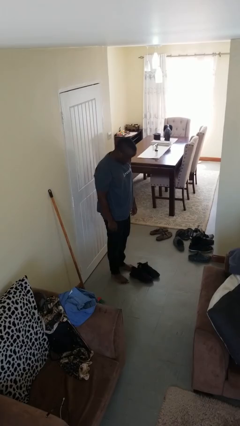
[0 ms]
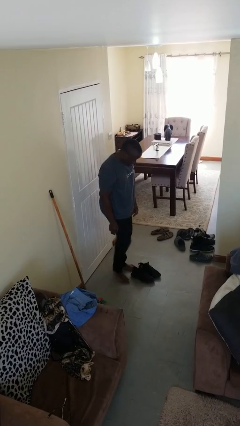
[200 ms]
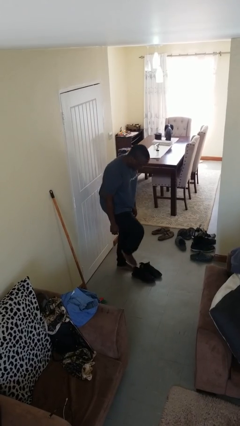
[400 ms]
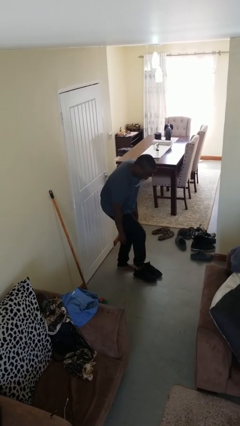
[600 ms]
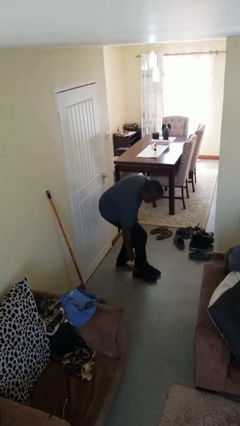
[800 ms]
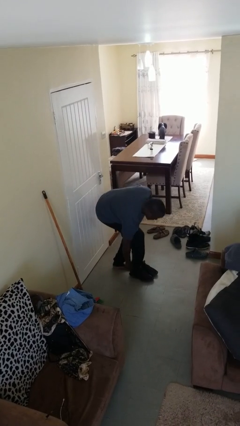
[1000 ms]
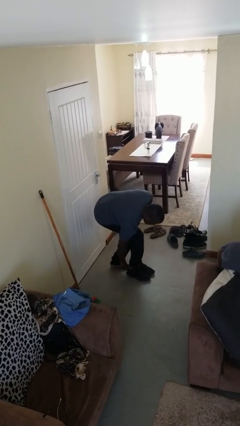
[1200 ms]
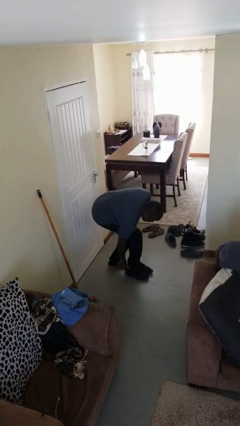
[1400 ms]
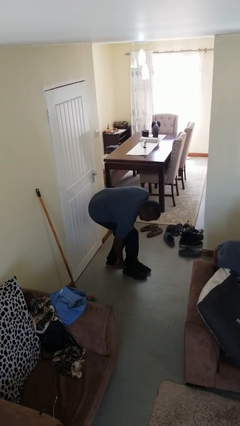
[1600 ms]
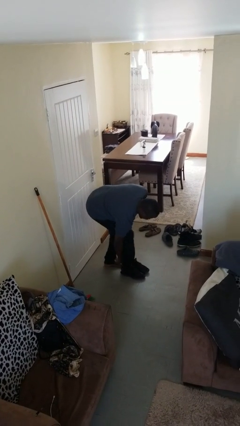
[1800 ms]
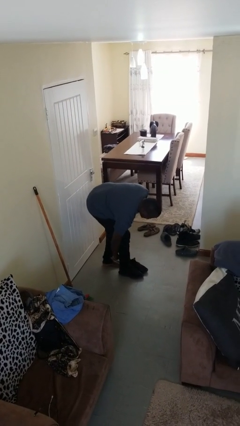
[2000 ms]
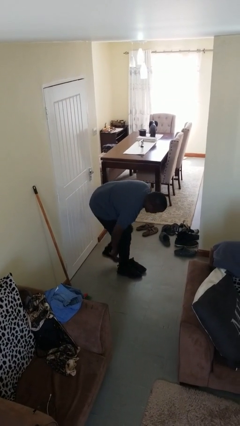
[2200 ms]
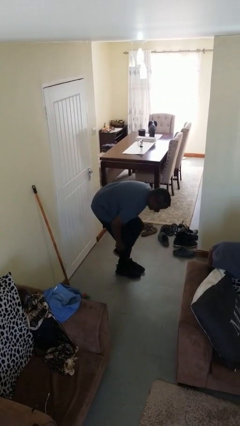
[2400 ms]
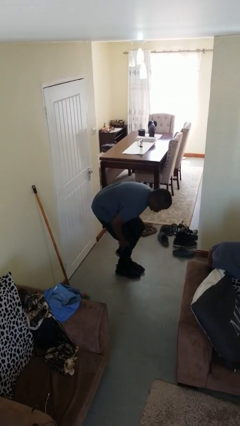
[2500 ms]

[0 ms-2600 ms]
person puts on shoes

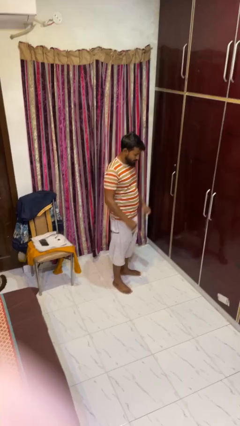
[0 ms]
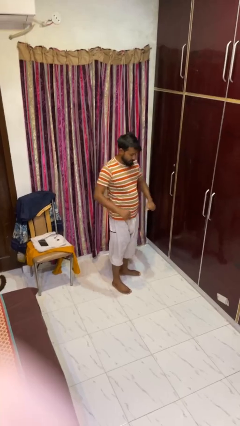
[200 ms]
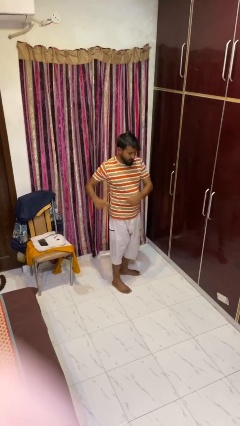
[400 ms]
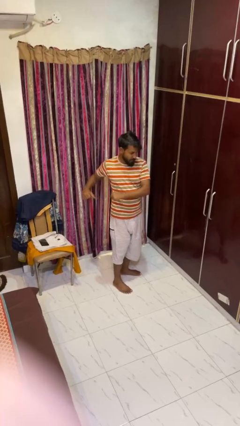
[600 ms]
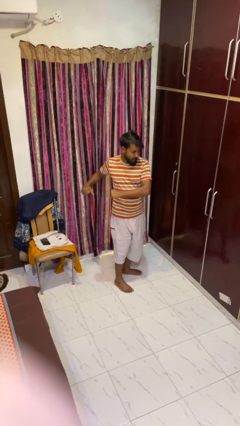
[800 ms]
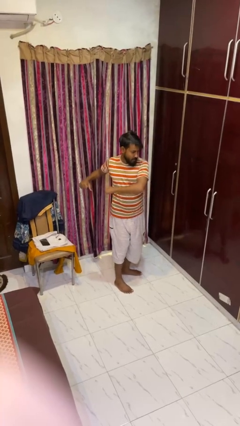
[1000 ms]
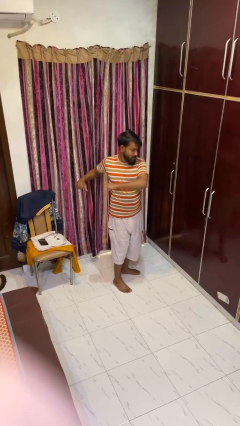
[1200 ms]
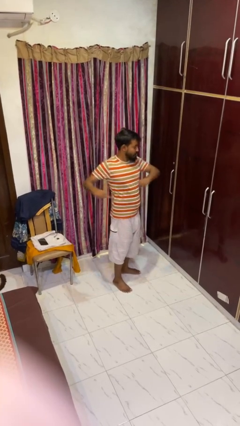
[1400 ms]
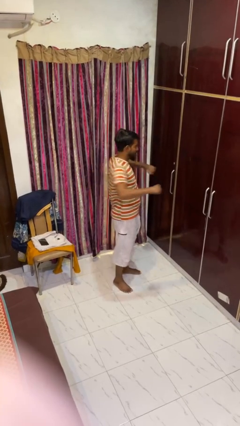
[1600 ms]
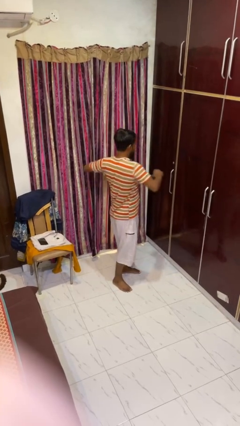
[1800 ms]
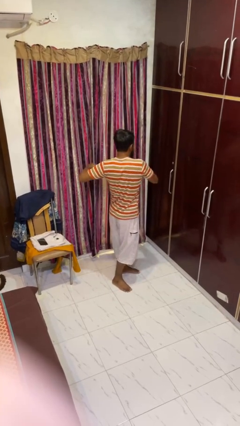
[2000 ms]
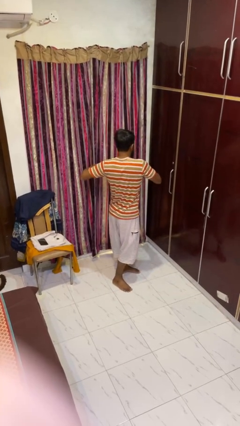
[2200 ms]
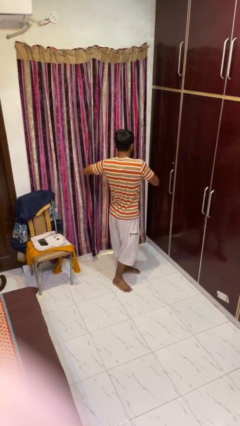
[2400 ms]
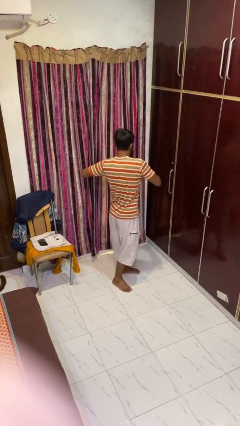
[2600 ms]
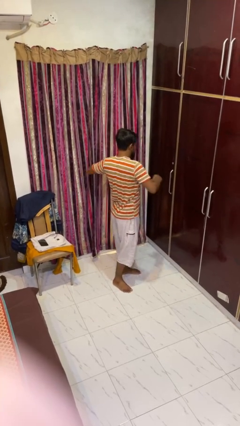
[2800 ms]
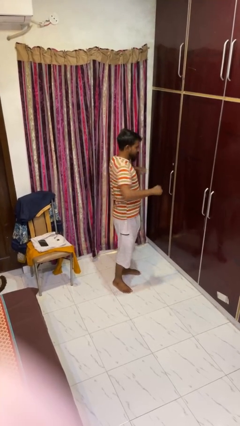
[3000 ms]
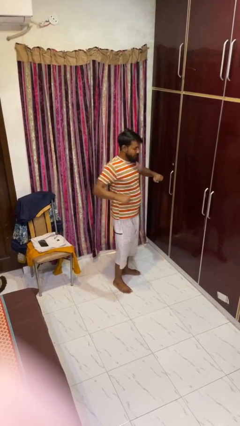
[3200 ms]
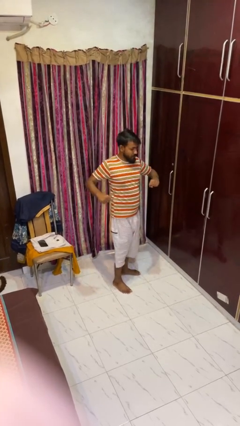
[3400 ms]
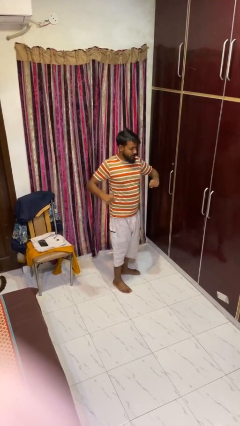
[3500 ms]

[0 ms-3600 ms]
person stretches arms to side

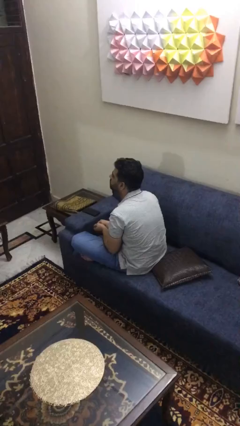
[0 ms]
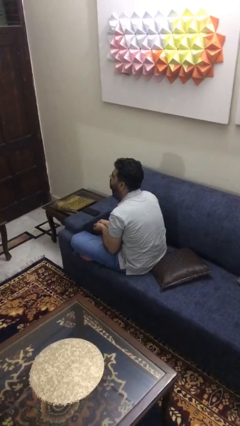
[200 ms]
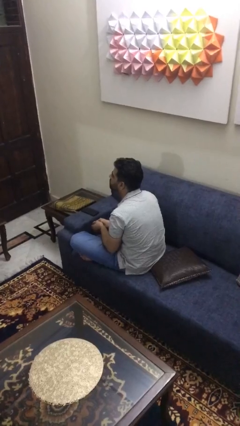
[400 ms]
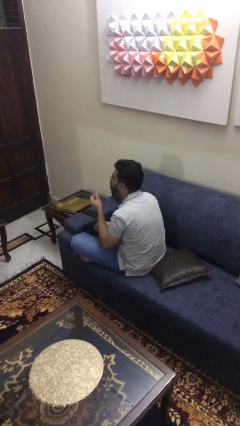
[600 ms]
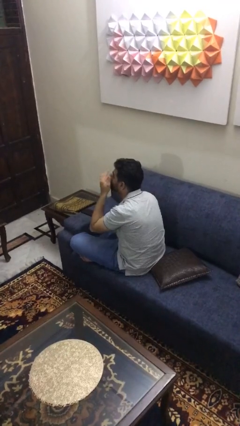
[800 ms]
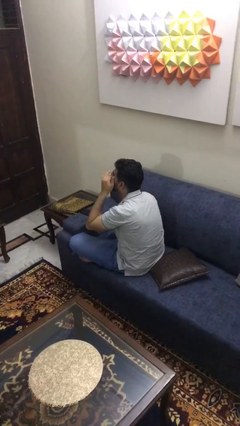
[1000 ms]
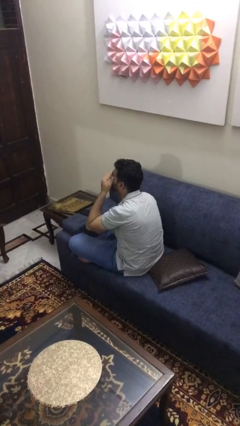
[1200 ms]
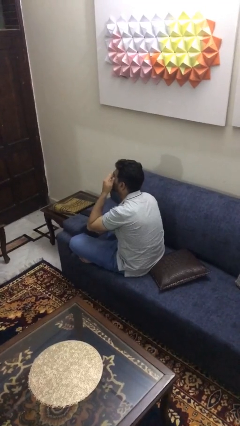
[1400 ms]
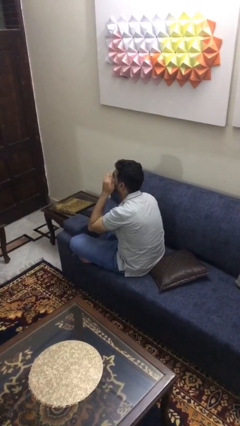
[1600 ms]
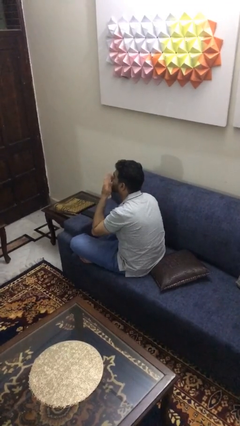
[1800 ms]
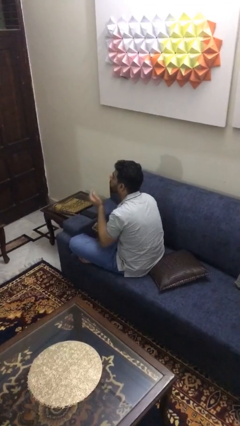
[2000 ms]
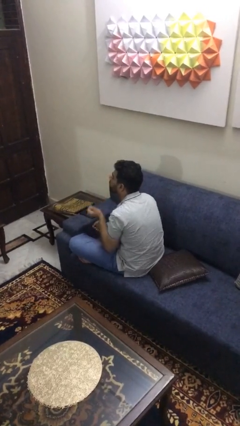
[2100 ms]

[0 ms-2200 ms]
person rubs eyes

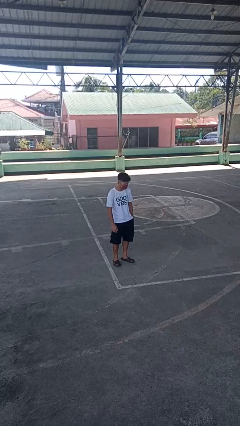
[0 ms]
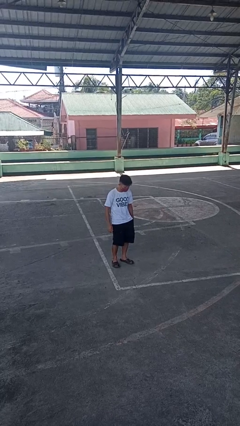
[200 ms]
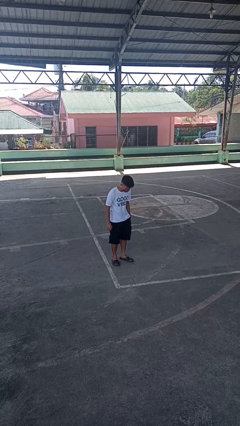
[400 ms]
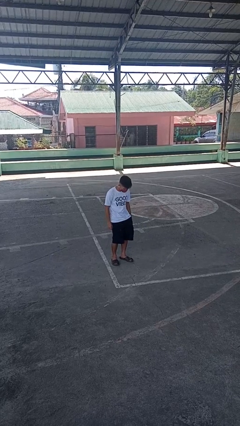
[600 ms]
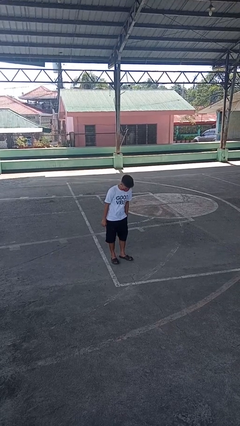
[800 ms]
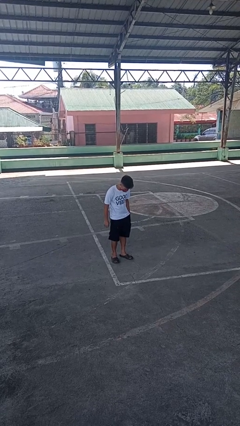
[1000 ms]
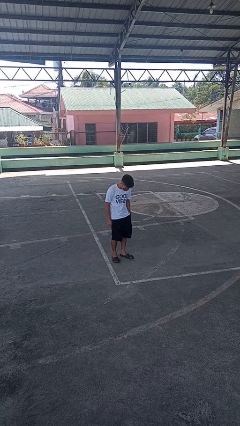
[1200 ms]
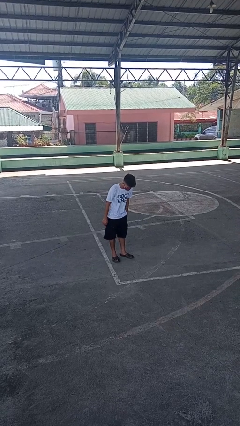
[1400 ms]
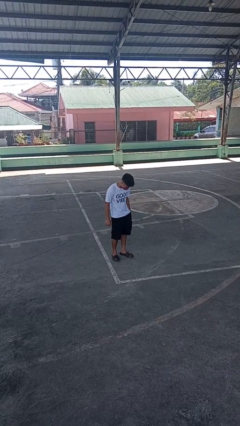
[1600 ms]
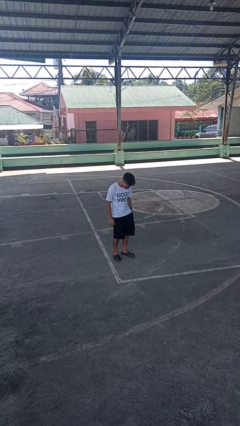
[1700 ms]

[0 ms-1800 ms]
person wiggles hips

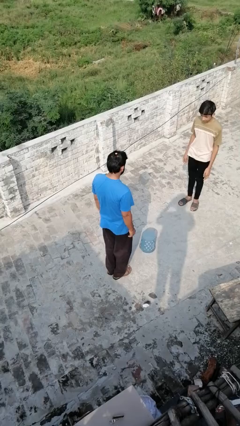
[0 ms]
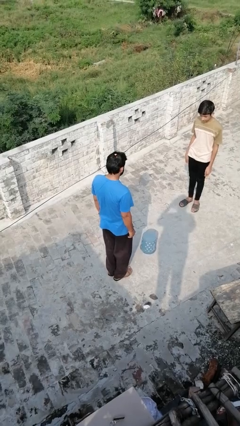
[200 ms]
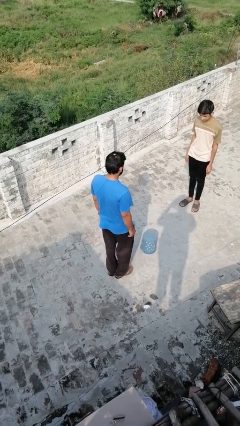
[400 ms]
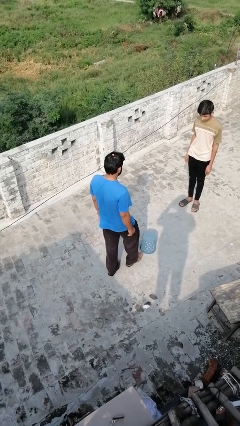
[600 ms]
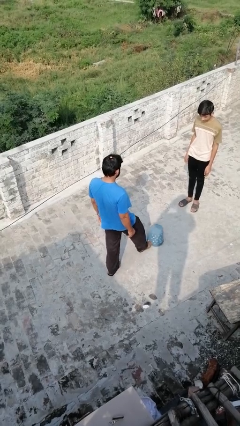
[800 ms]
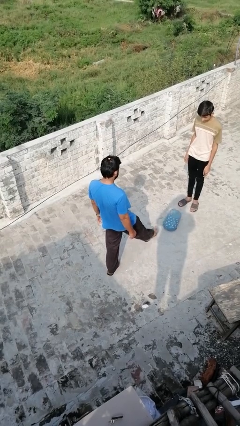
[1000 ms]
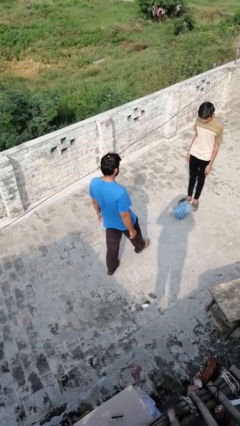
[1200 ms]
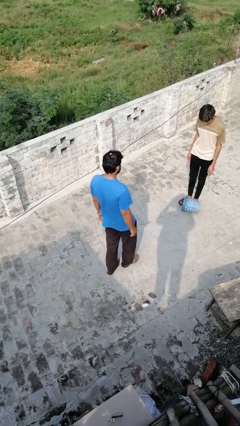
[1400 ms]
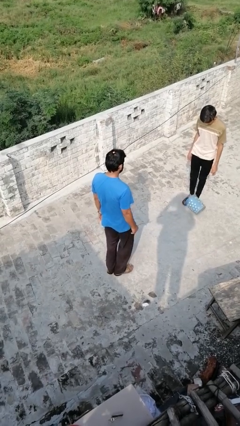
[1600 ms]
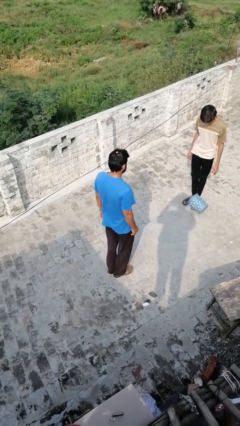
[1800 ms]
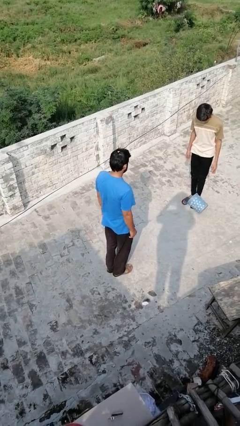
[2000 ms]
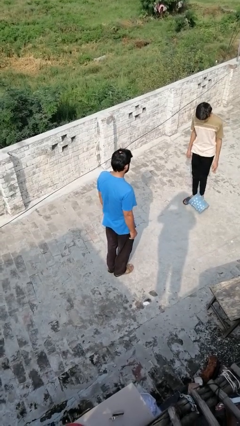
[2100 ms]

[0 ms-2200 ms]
person kicks object to person

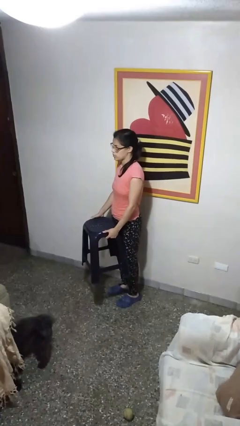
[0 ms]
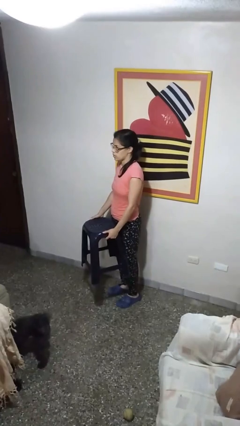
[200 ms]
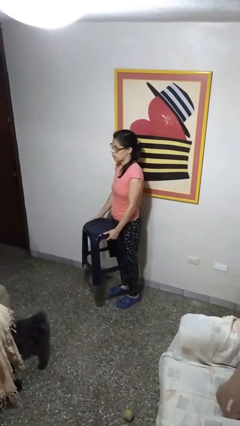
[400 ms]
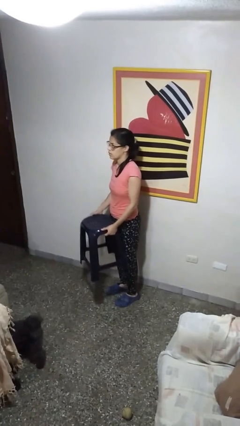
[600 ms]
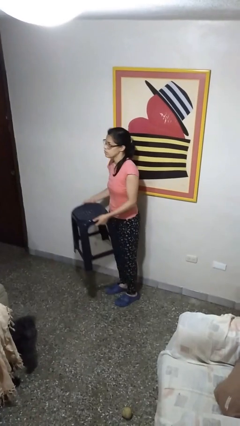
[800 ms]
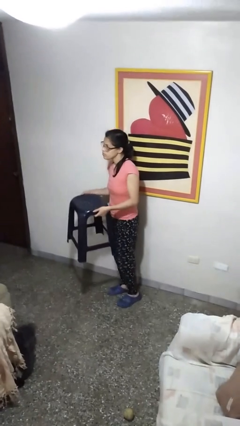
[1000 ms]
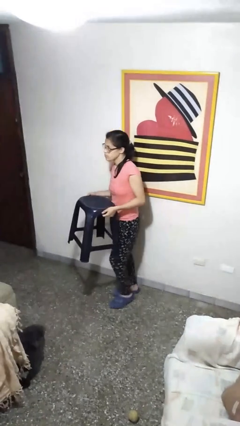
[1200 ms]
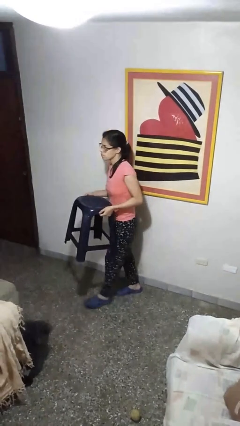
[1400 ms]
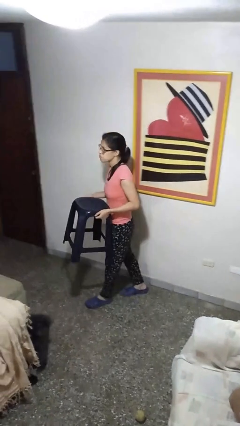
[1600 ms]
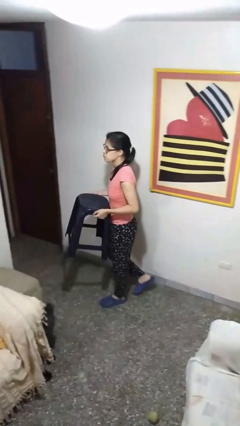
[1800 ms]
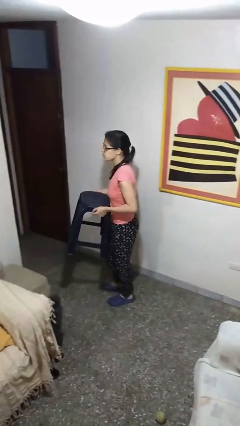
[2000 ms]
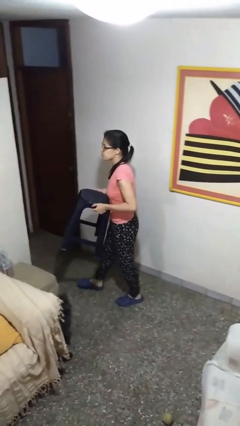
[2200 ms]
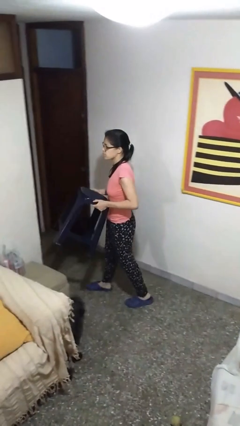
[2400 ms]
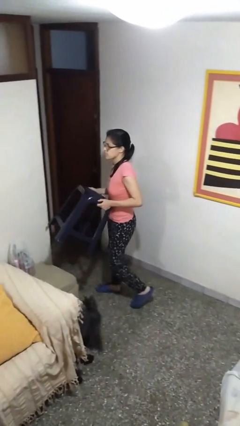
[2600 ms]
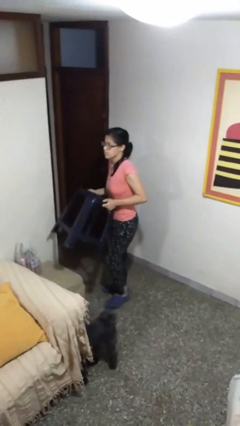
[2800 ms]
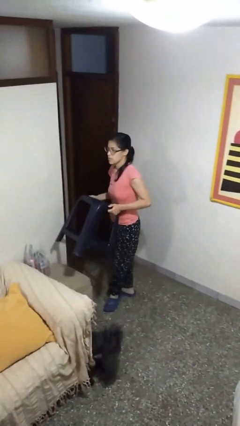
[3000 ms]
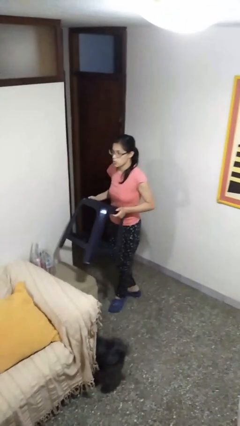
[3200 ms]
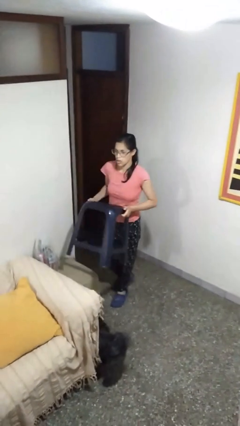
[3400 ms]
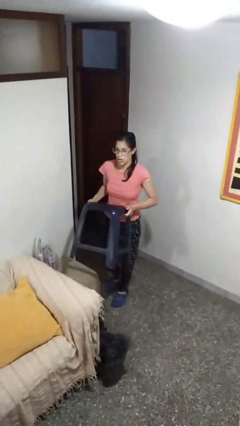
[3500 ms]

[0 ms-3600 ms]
person carries furniture

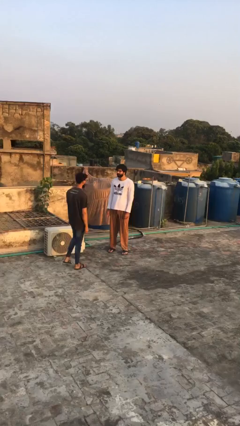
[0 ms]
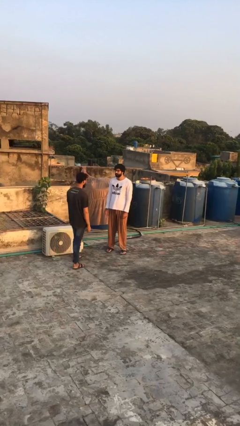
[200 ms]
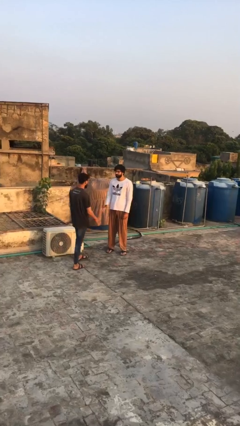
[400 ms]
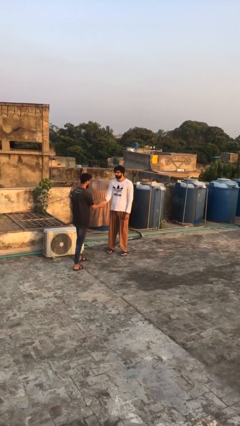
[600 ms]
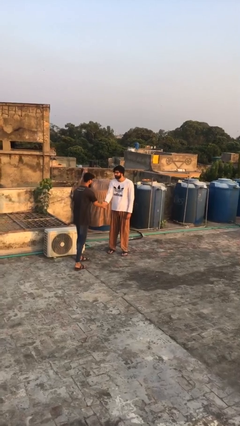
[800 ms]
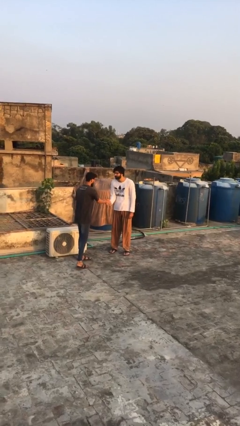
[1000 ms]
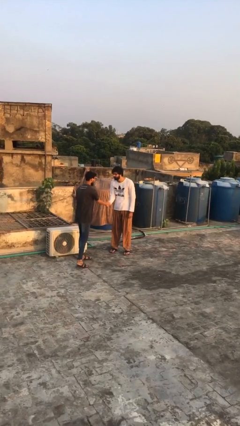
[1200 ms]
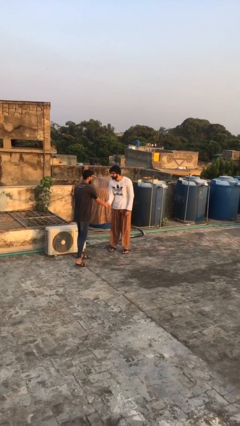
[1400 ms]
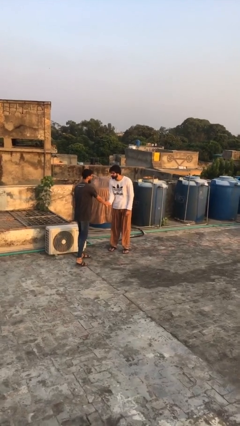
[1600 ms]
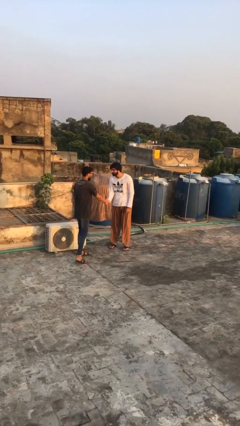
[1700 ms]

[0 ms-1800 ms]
person shakes hand
